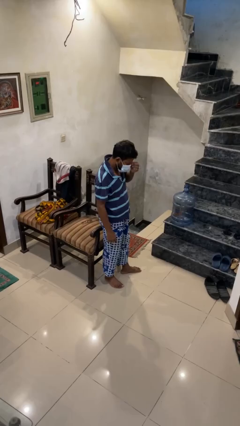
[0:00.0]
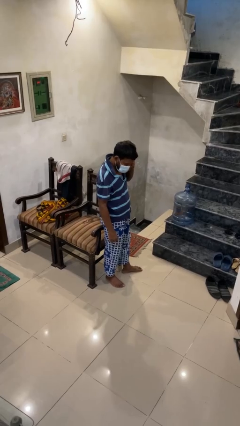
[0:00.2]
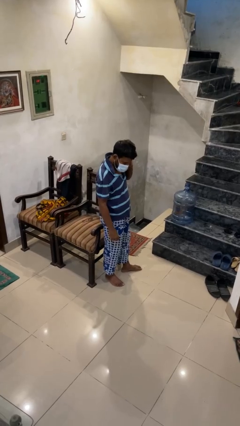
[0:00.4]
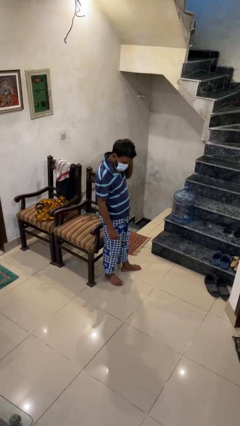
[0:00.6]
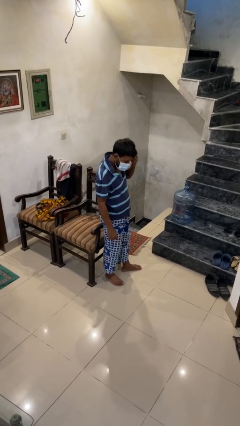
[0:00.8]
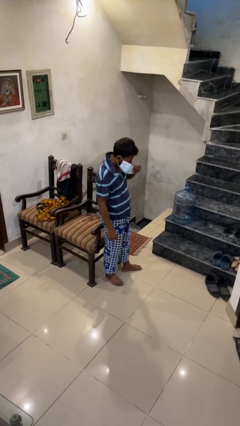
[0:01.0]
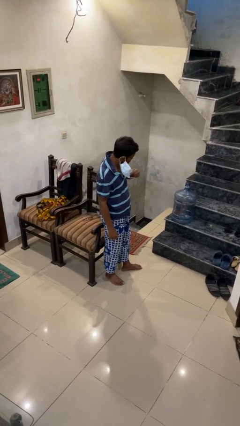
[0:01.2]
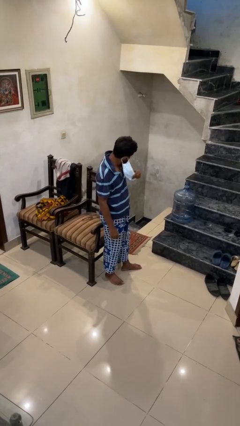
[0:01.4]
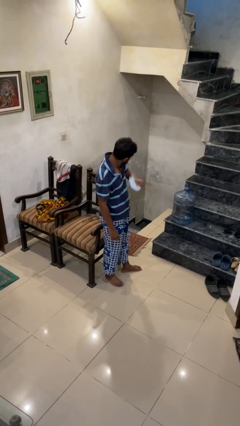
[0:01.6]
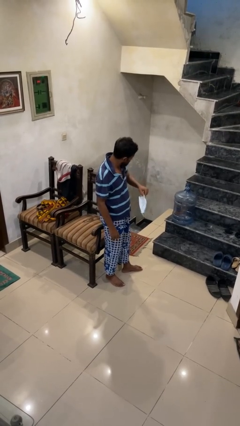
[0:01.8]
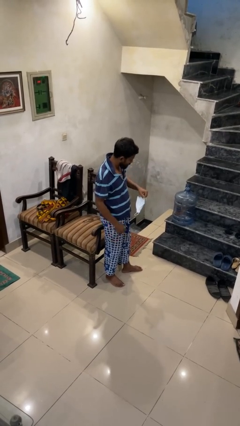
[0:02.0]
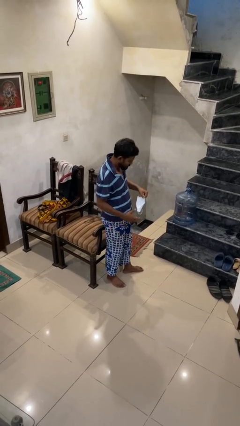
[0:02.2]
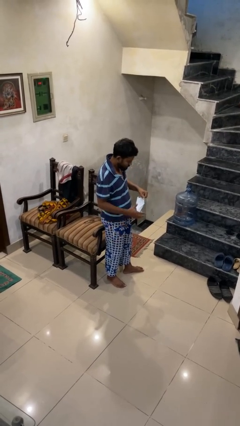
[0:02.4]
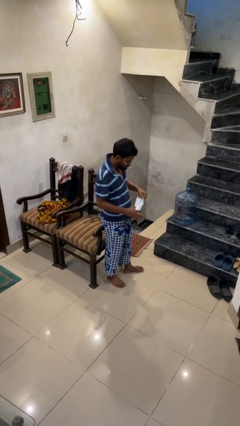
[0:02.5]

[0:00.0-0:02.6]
person takes off facemask

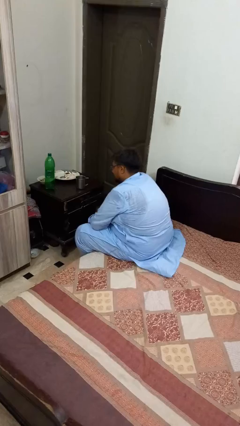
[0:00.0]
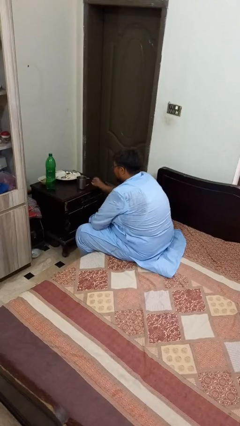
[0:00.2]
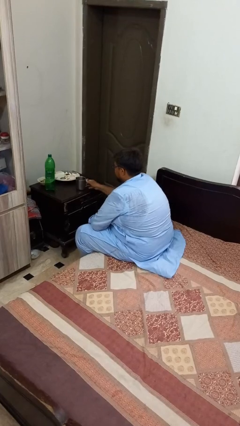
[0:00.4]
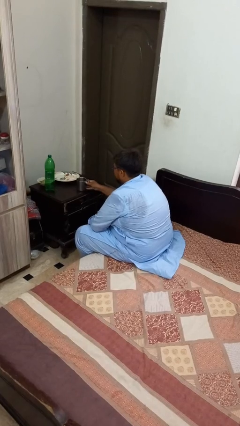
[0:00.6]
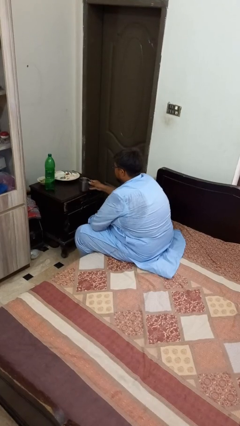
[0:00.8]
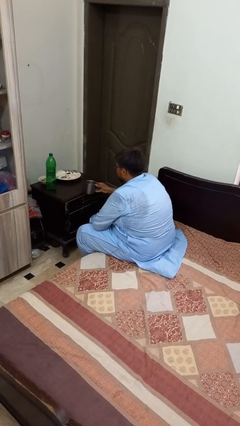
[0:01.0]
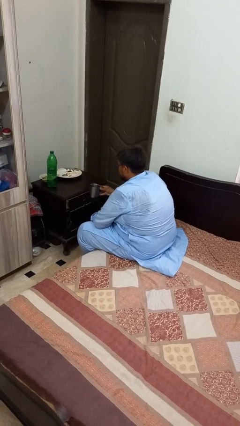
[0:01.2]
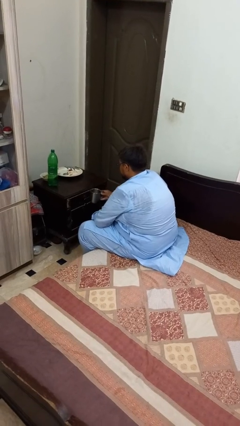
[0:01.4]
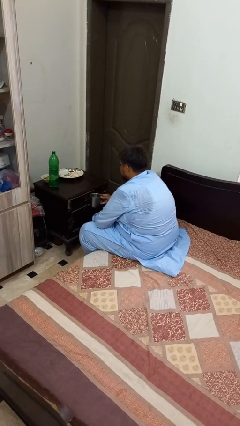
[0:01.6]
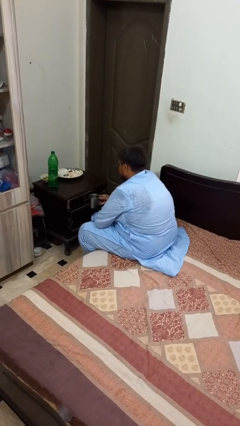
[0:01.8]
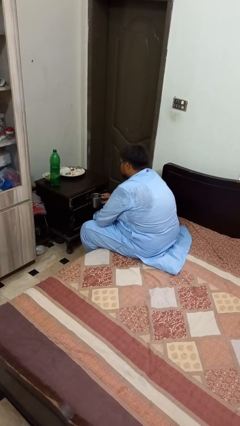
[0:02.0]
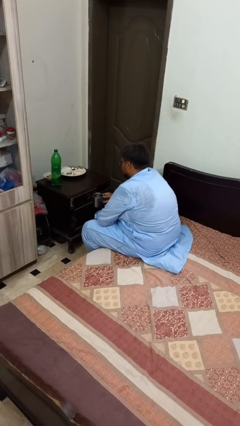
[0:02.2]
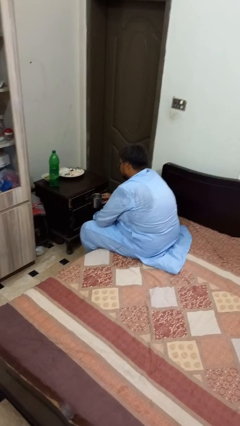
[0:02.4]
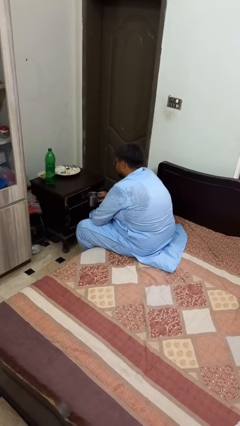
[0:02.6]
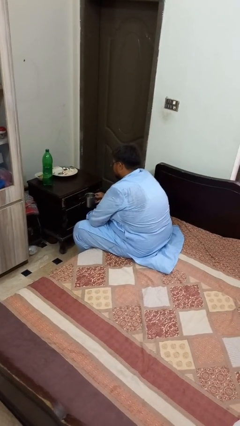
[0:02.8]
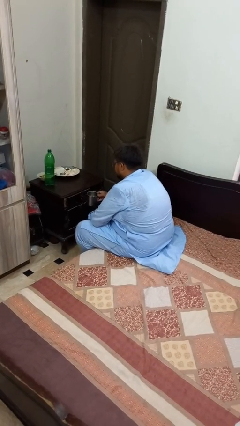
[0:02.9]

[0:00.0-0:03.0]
person picks up object from table

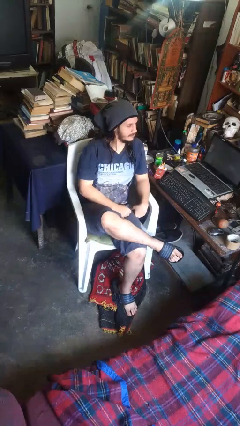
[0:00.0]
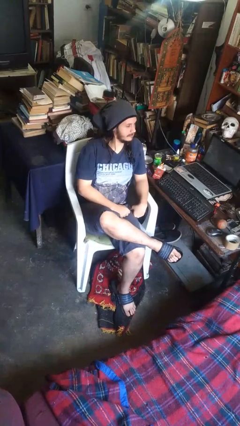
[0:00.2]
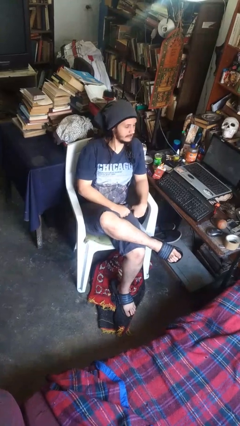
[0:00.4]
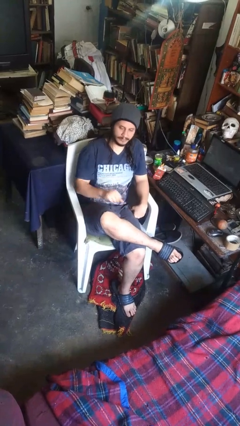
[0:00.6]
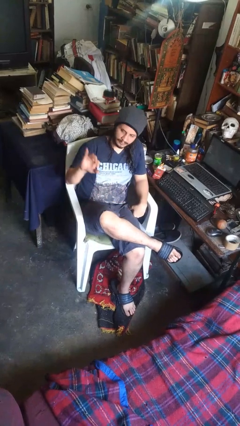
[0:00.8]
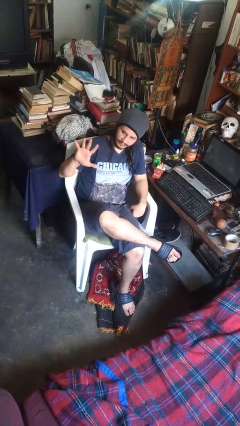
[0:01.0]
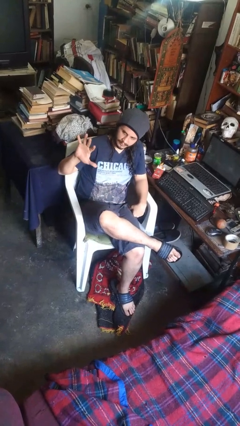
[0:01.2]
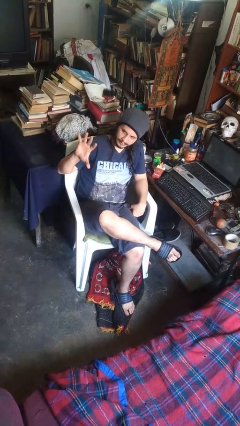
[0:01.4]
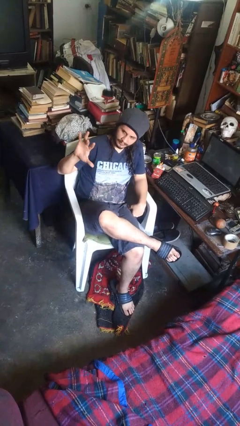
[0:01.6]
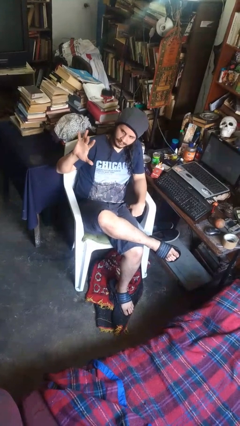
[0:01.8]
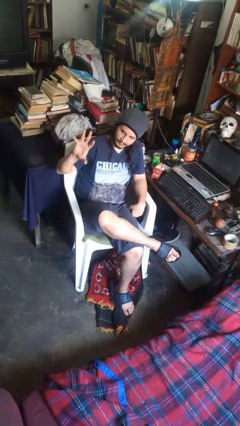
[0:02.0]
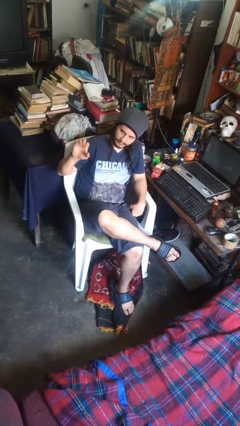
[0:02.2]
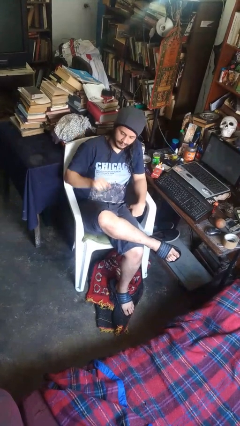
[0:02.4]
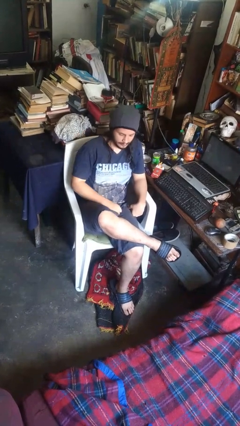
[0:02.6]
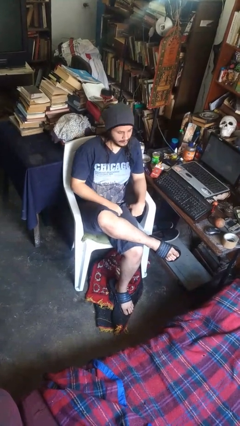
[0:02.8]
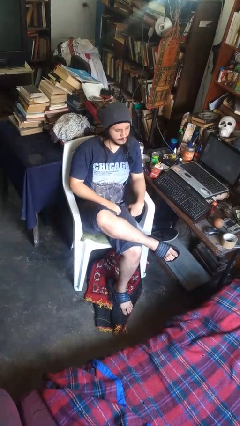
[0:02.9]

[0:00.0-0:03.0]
person gestures number five

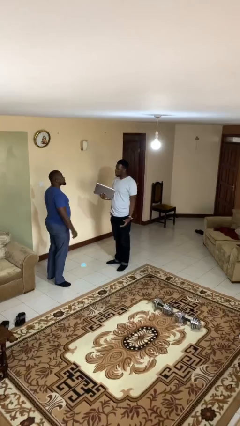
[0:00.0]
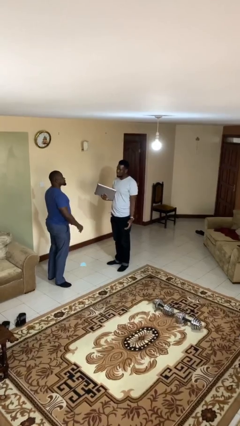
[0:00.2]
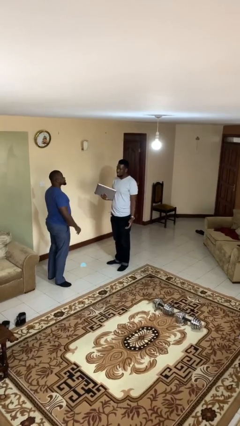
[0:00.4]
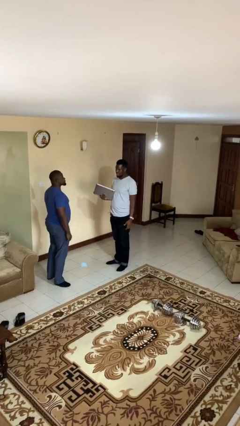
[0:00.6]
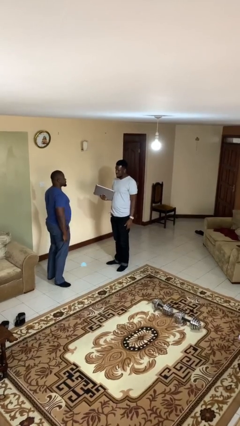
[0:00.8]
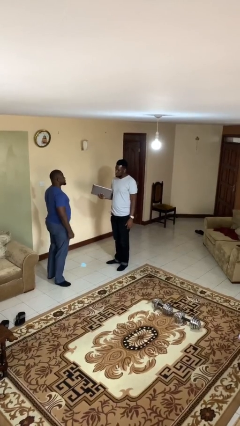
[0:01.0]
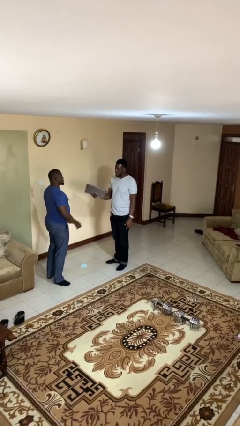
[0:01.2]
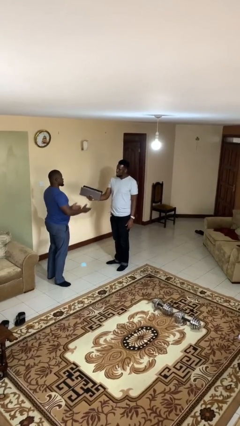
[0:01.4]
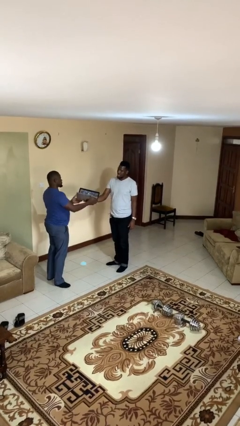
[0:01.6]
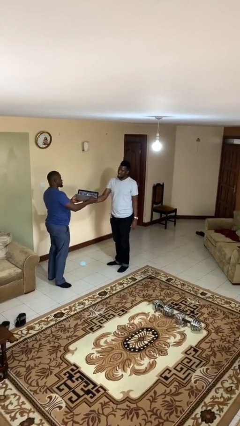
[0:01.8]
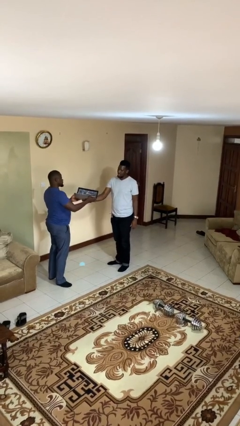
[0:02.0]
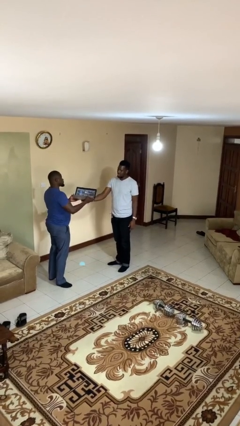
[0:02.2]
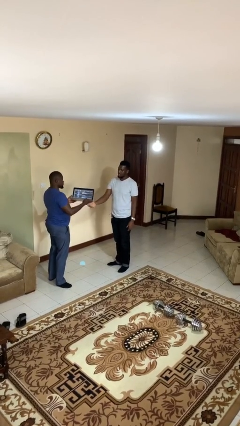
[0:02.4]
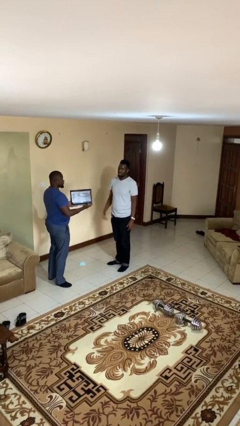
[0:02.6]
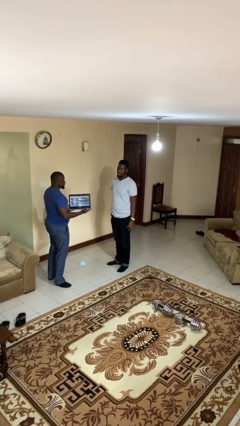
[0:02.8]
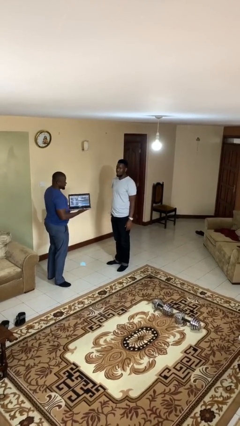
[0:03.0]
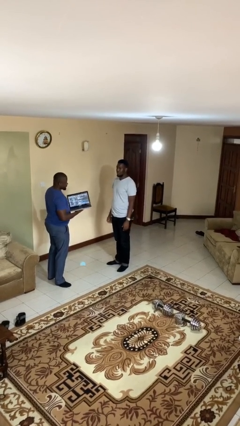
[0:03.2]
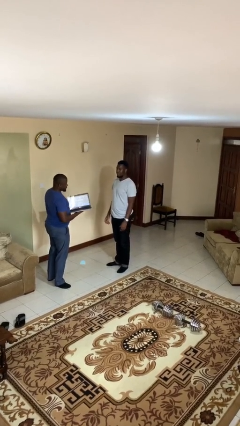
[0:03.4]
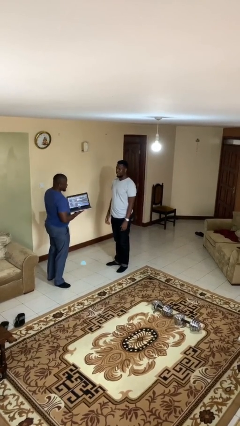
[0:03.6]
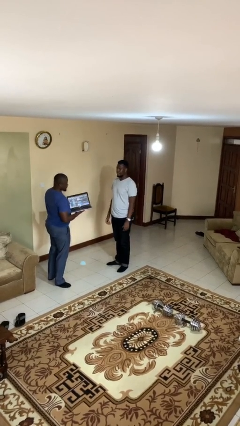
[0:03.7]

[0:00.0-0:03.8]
person transfers object to person

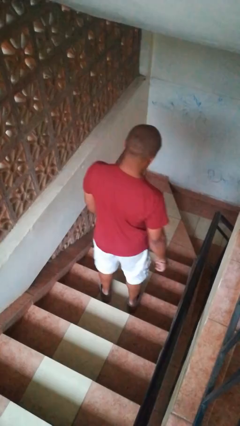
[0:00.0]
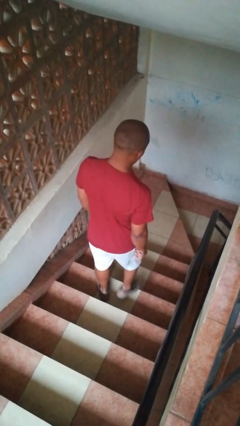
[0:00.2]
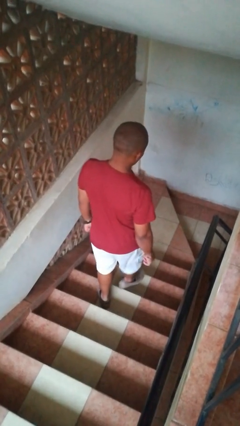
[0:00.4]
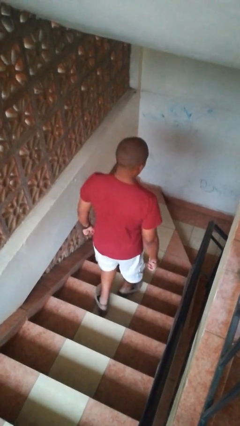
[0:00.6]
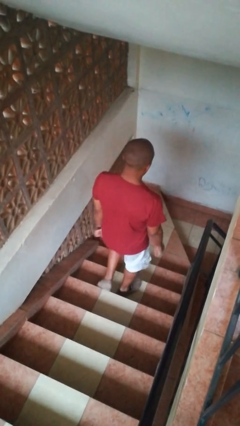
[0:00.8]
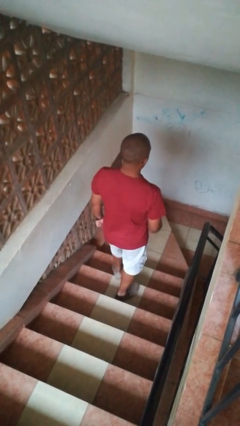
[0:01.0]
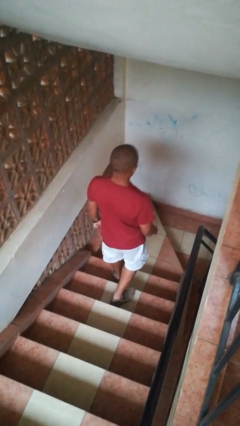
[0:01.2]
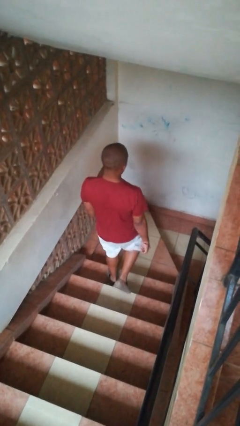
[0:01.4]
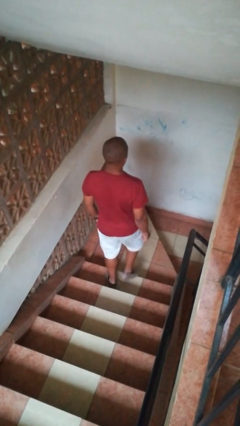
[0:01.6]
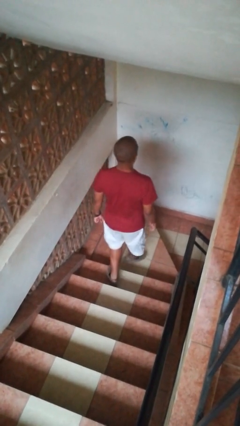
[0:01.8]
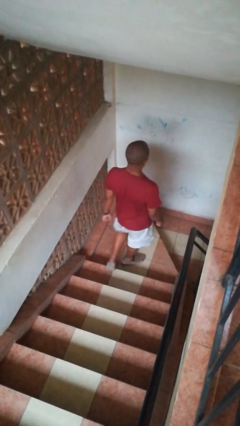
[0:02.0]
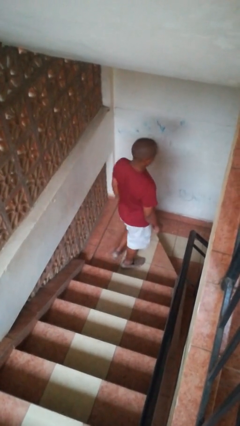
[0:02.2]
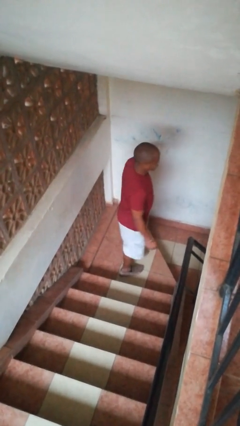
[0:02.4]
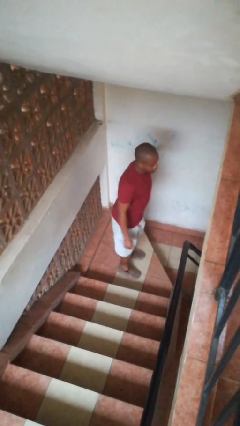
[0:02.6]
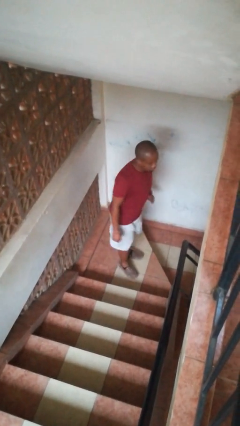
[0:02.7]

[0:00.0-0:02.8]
person climbs down stairs

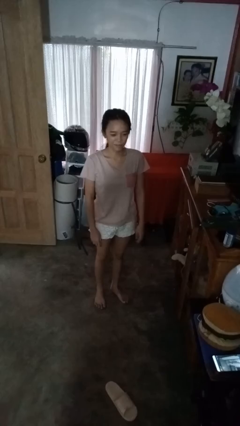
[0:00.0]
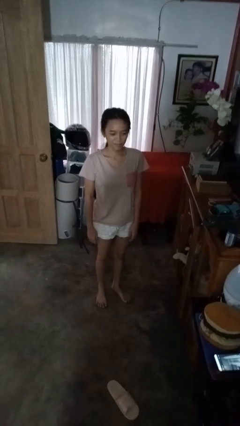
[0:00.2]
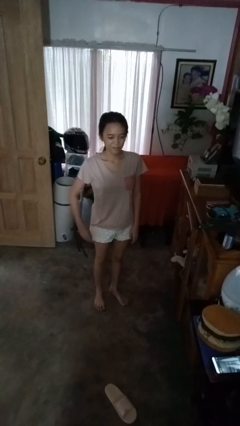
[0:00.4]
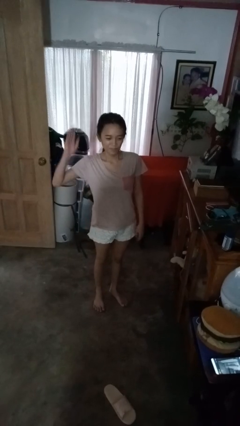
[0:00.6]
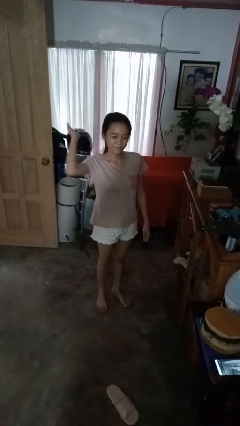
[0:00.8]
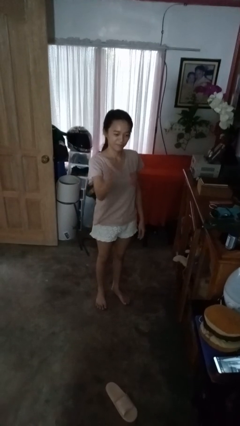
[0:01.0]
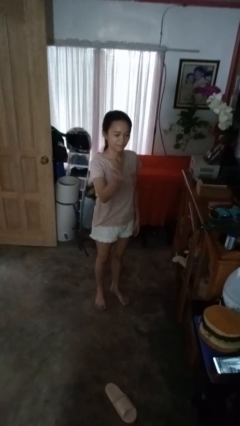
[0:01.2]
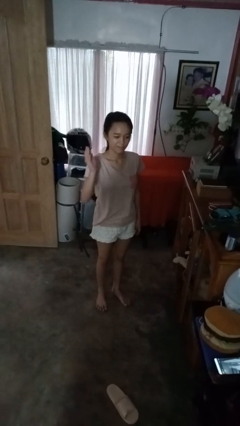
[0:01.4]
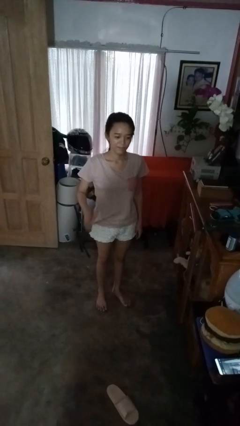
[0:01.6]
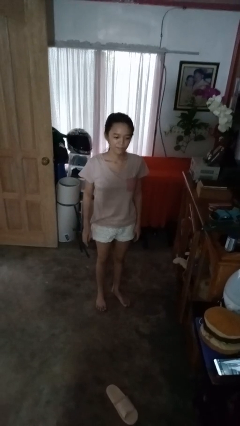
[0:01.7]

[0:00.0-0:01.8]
person karate chop

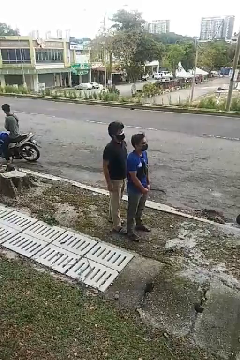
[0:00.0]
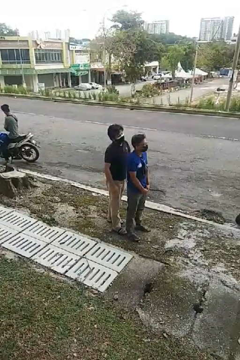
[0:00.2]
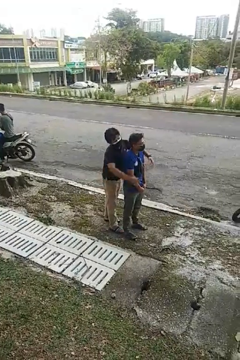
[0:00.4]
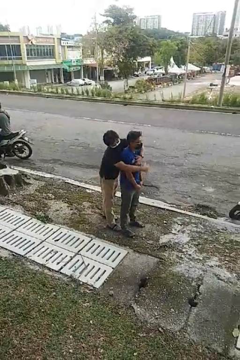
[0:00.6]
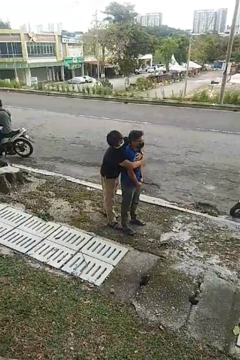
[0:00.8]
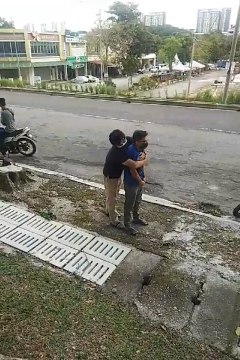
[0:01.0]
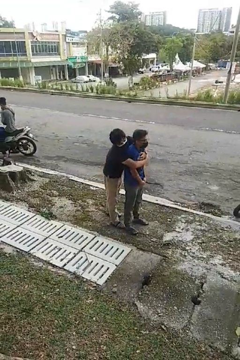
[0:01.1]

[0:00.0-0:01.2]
person hugs person from behind
